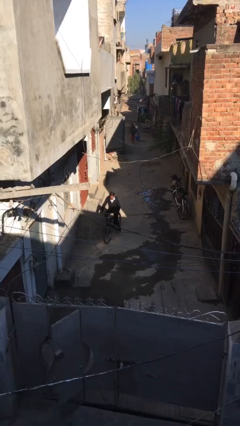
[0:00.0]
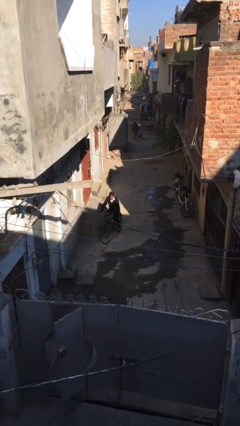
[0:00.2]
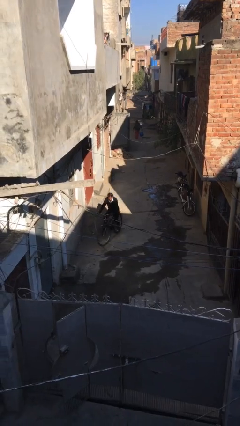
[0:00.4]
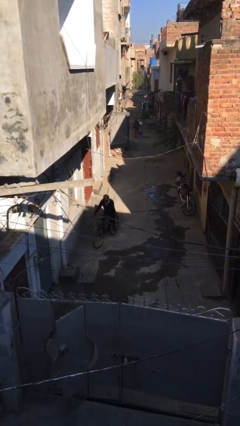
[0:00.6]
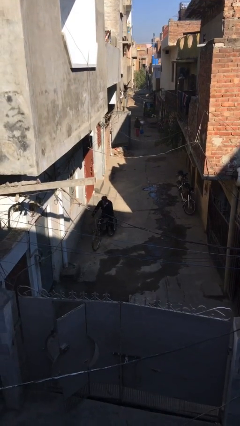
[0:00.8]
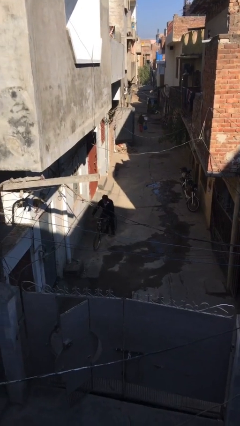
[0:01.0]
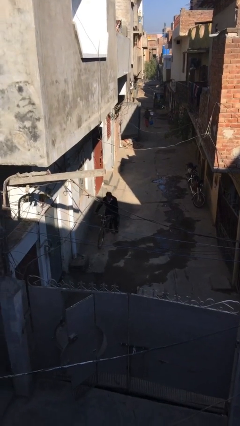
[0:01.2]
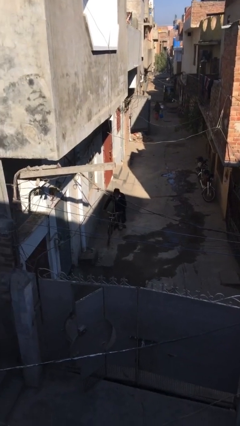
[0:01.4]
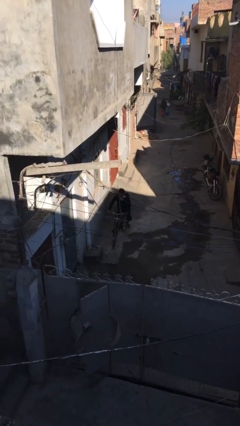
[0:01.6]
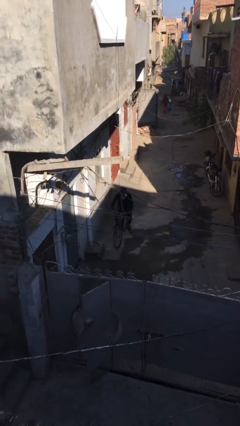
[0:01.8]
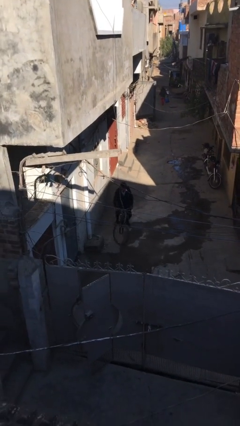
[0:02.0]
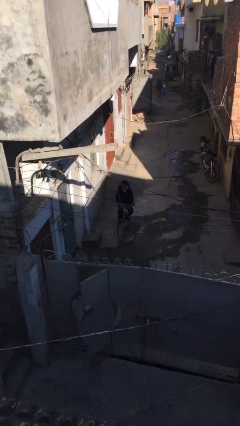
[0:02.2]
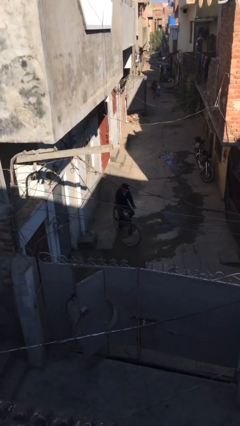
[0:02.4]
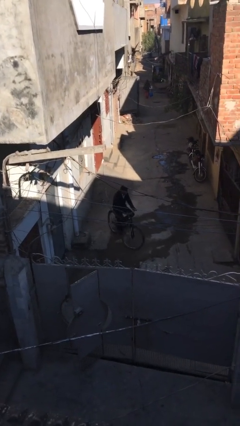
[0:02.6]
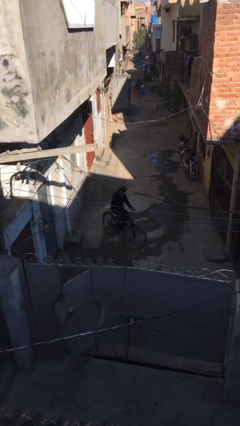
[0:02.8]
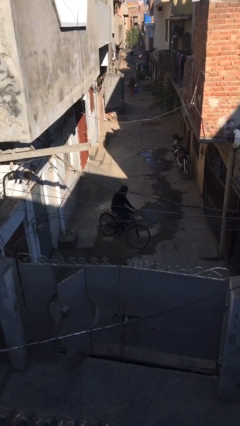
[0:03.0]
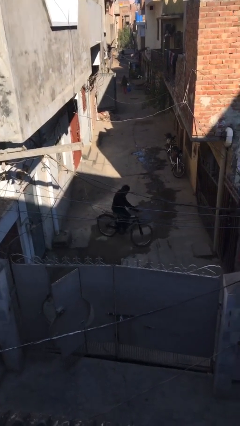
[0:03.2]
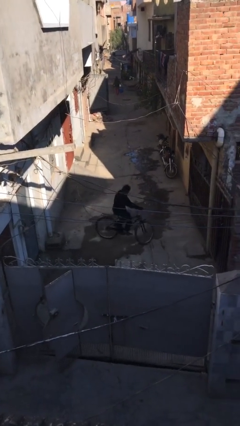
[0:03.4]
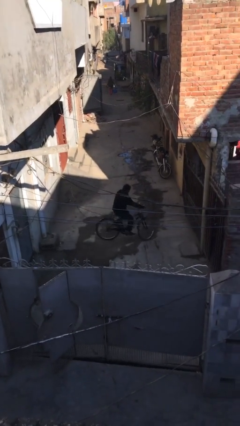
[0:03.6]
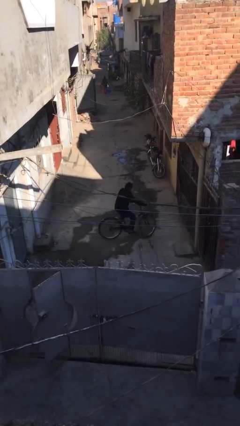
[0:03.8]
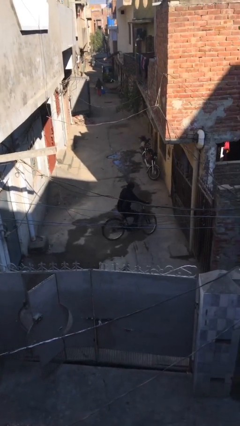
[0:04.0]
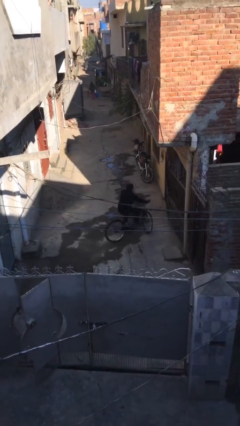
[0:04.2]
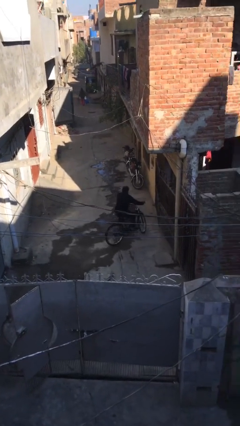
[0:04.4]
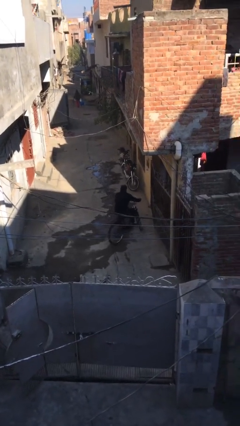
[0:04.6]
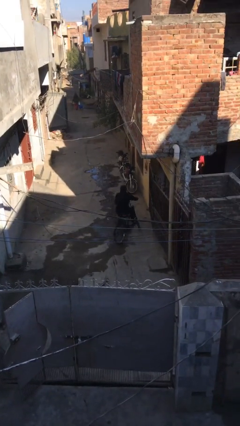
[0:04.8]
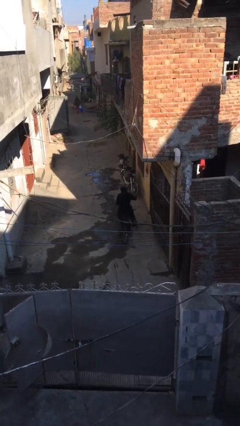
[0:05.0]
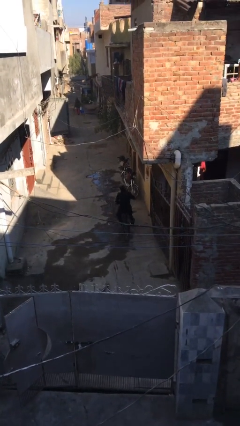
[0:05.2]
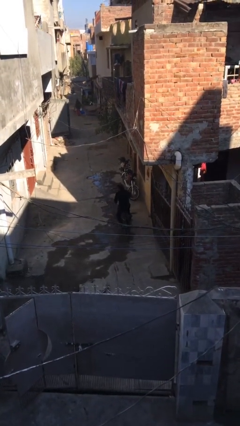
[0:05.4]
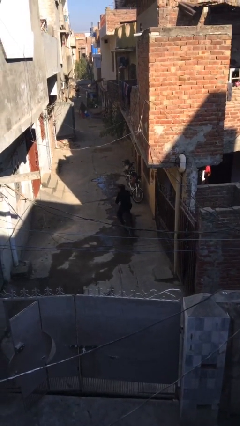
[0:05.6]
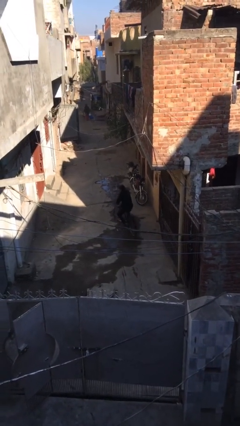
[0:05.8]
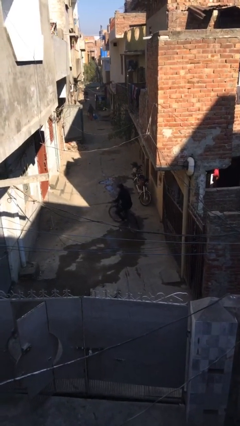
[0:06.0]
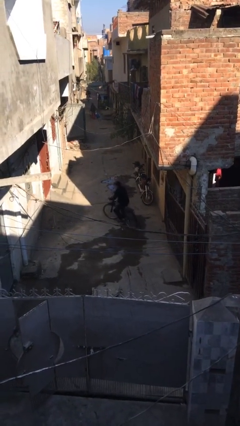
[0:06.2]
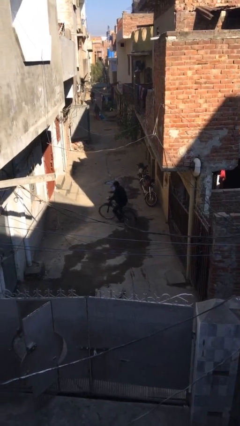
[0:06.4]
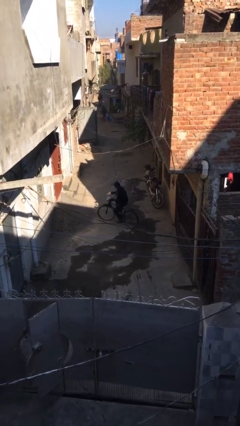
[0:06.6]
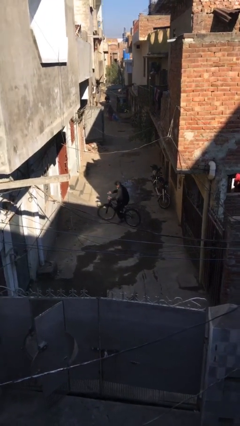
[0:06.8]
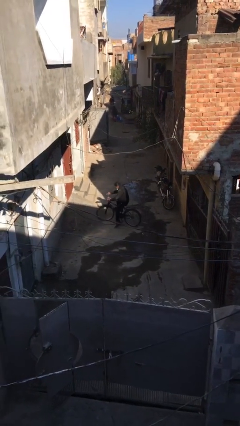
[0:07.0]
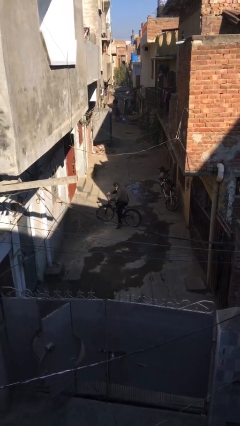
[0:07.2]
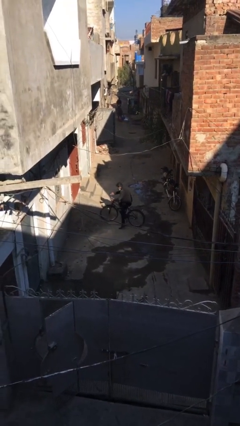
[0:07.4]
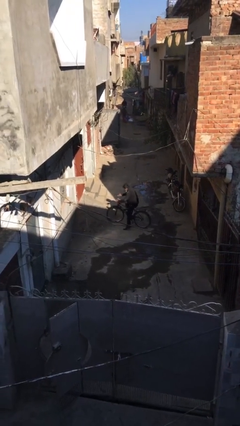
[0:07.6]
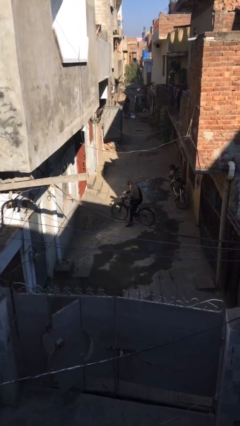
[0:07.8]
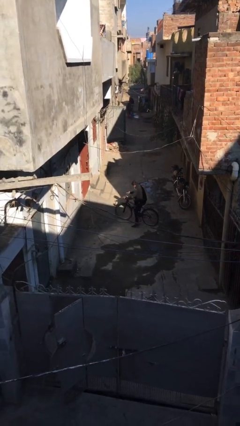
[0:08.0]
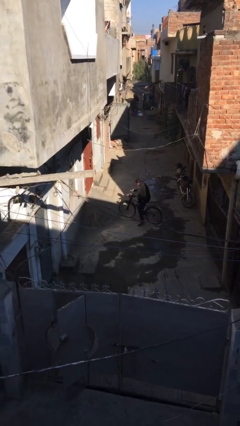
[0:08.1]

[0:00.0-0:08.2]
person rides bicycle

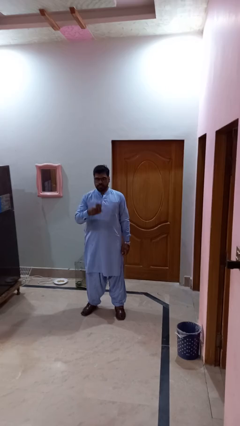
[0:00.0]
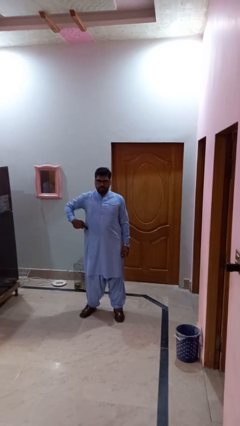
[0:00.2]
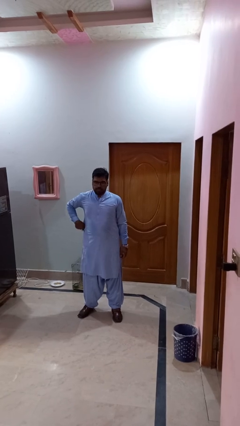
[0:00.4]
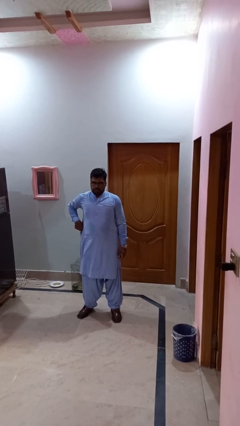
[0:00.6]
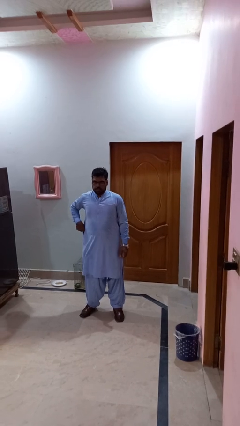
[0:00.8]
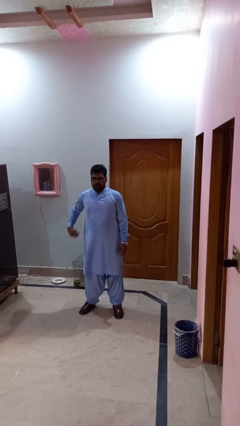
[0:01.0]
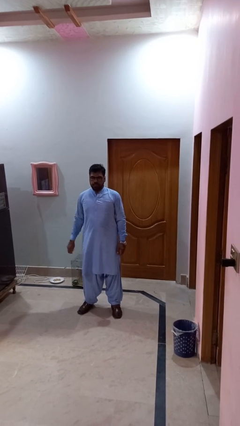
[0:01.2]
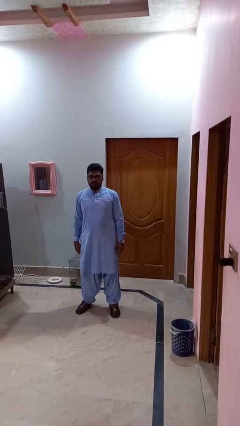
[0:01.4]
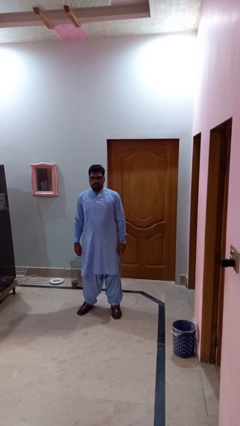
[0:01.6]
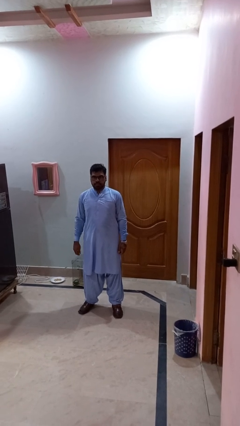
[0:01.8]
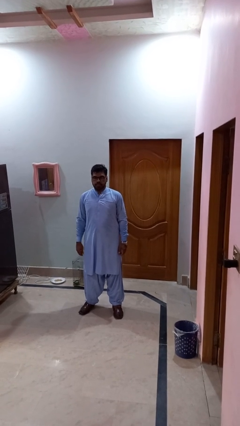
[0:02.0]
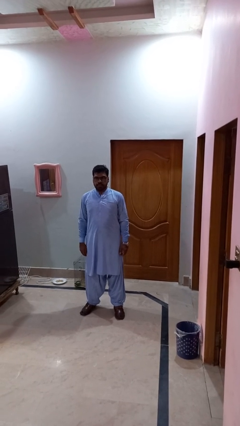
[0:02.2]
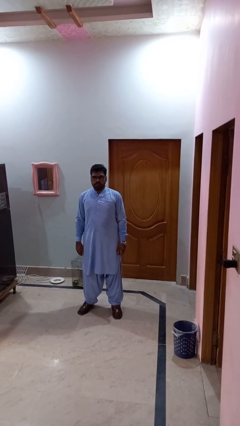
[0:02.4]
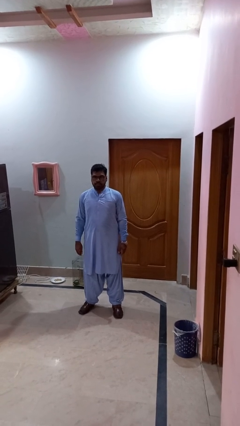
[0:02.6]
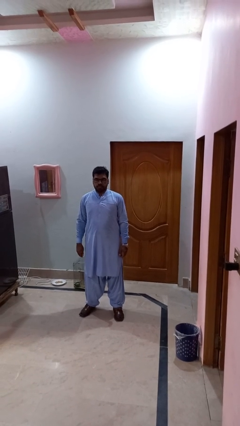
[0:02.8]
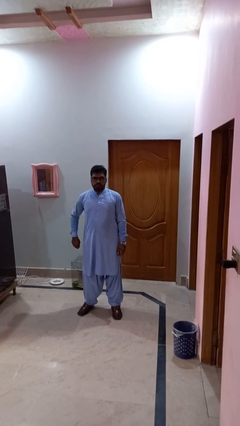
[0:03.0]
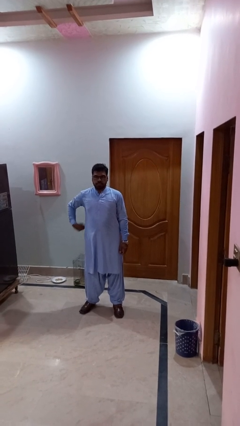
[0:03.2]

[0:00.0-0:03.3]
person puts phone into pocket

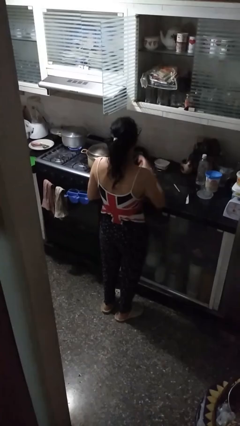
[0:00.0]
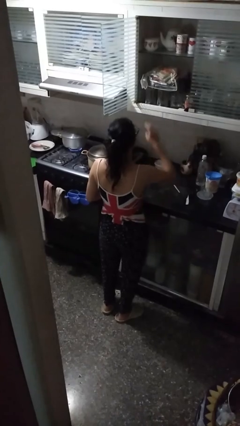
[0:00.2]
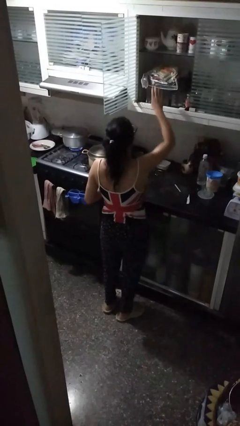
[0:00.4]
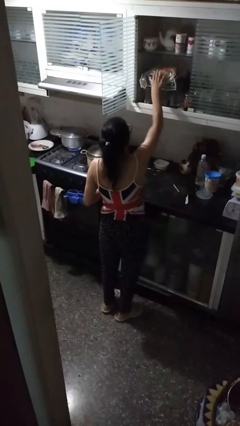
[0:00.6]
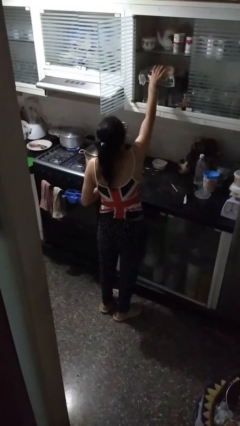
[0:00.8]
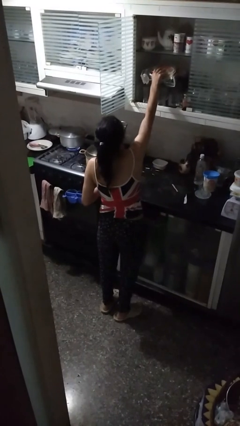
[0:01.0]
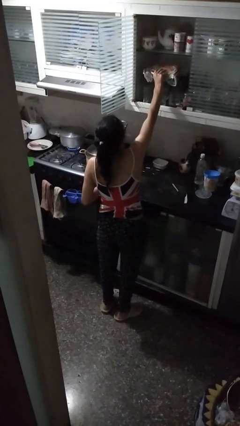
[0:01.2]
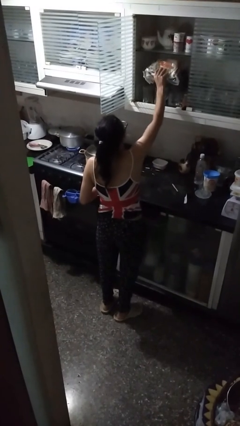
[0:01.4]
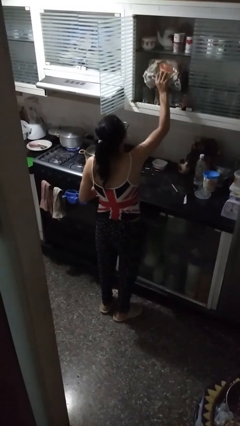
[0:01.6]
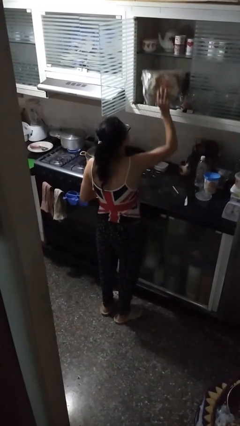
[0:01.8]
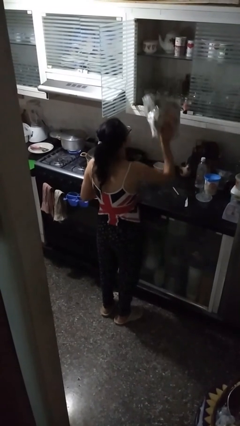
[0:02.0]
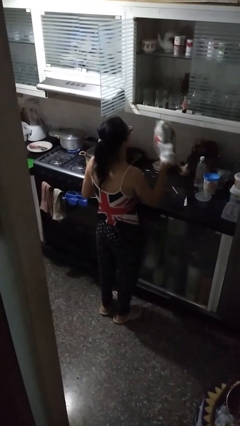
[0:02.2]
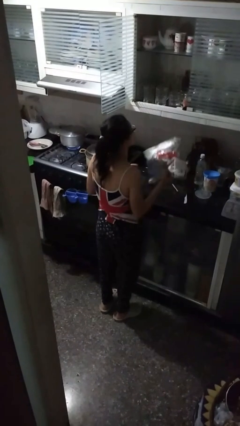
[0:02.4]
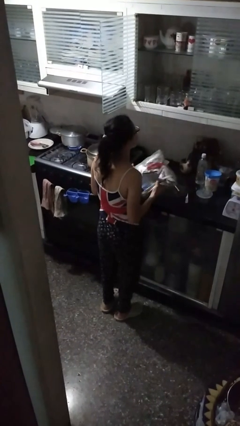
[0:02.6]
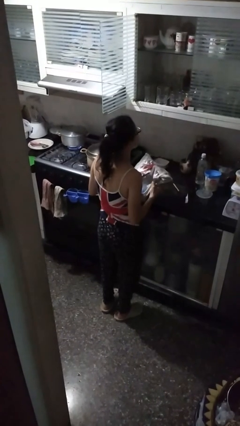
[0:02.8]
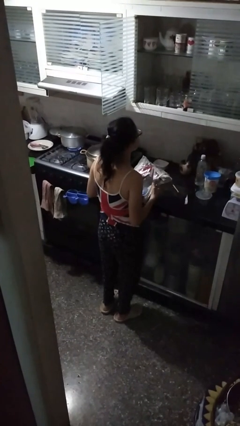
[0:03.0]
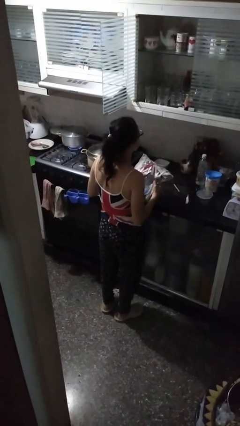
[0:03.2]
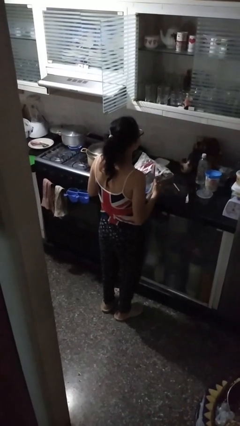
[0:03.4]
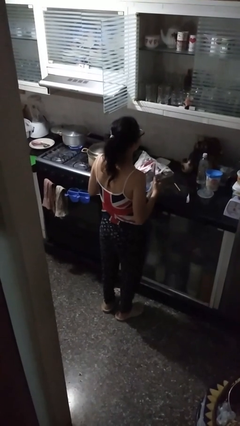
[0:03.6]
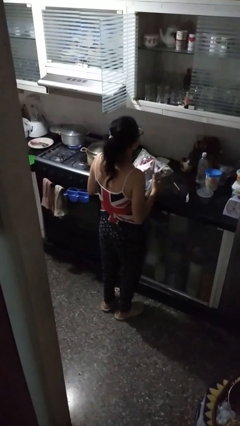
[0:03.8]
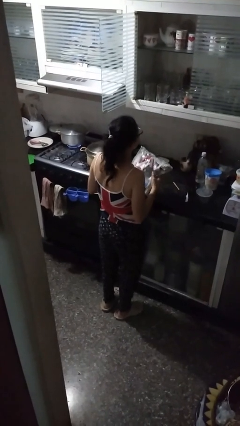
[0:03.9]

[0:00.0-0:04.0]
person picks up object from cabinet

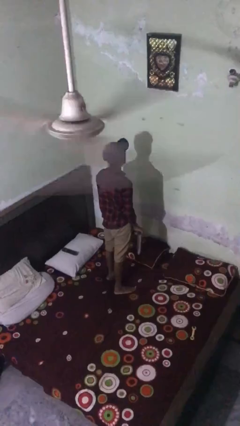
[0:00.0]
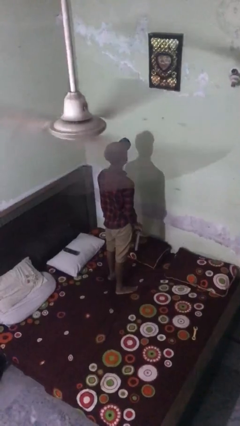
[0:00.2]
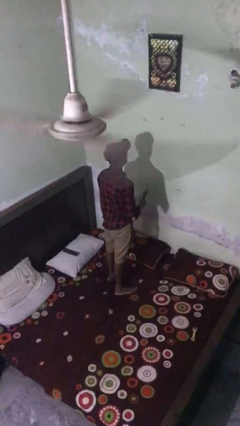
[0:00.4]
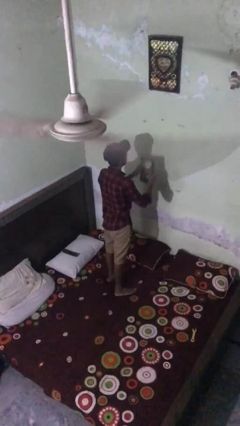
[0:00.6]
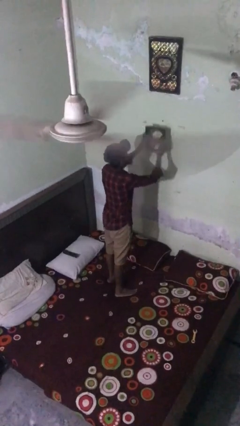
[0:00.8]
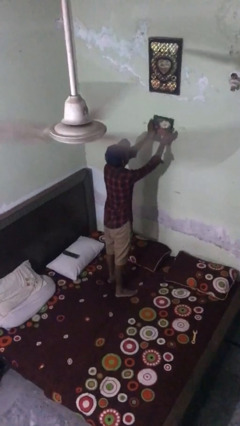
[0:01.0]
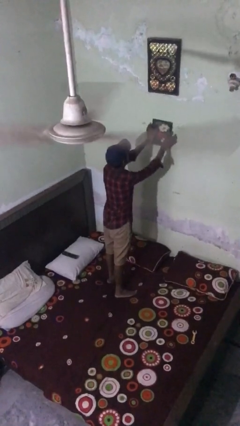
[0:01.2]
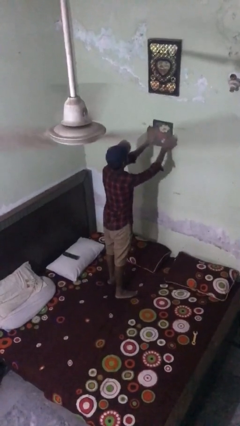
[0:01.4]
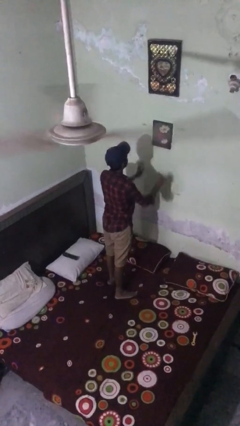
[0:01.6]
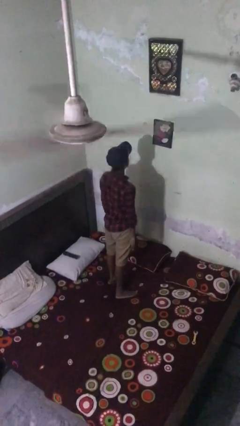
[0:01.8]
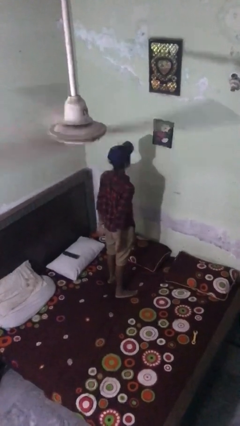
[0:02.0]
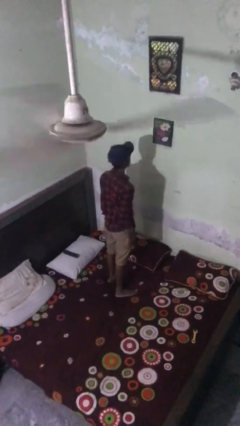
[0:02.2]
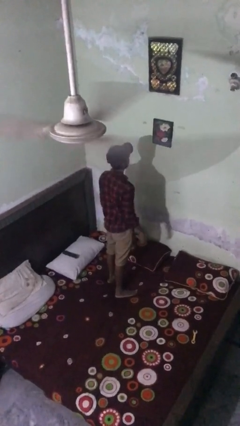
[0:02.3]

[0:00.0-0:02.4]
person puts up picture frame
